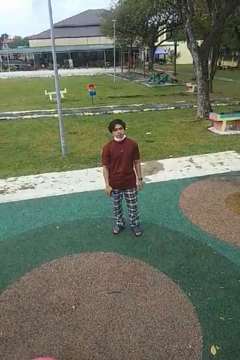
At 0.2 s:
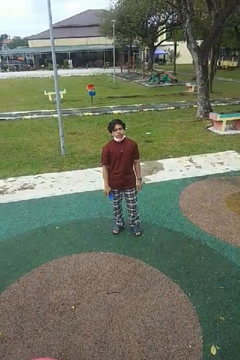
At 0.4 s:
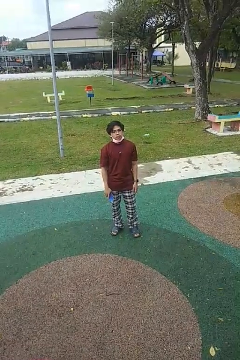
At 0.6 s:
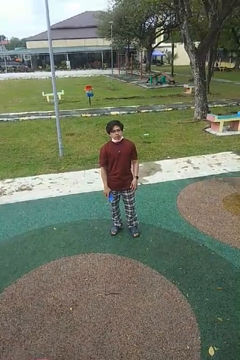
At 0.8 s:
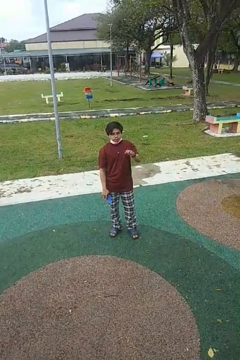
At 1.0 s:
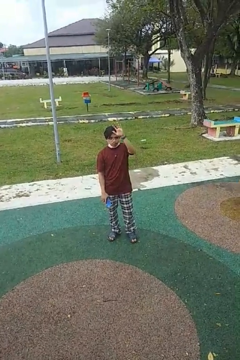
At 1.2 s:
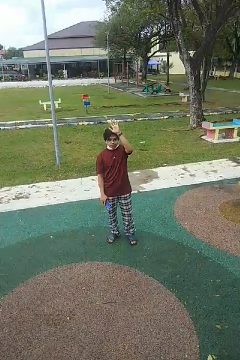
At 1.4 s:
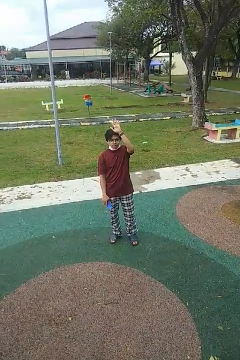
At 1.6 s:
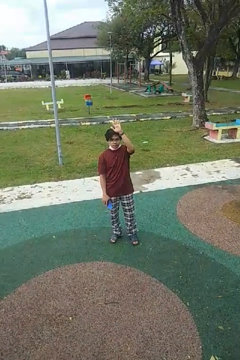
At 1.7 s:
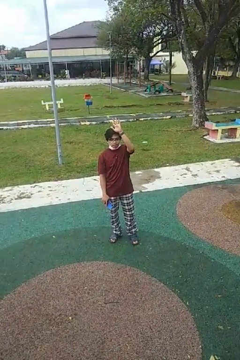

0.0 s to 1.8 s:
person gestures raise hand

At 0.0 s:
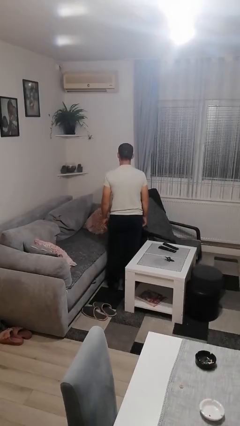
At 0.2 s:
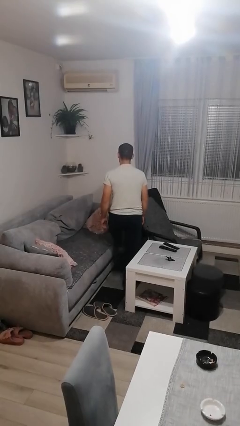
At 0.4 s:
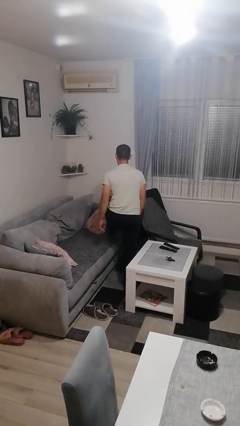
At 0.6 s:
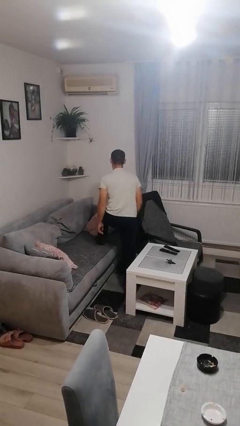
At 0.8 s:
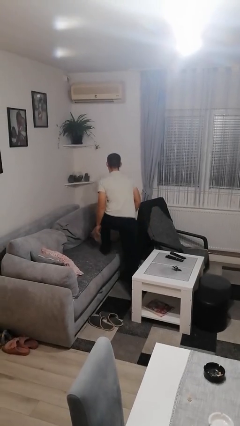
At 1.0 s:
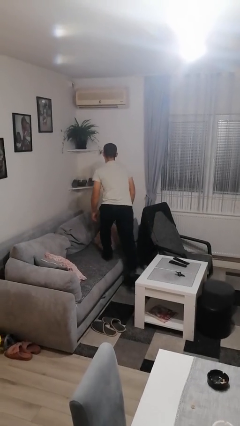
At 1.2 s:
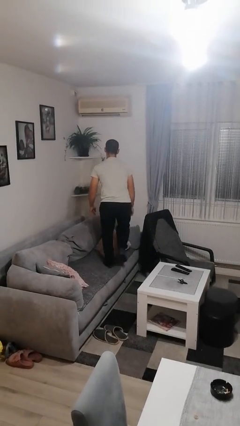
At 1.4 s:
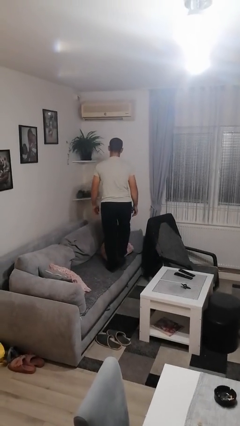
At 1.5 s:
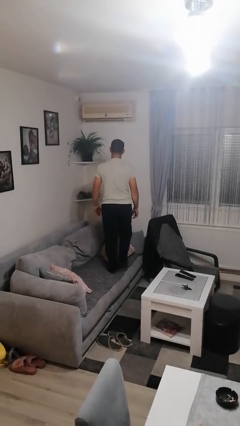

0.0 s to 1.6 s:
person climbs on couch

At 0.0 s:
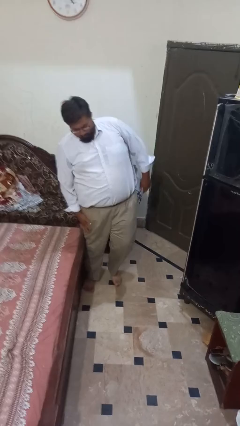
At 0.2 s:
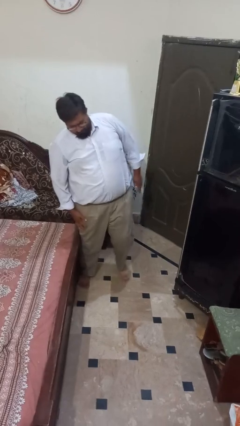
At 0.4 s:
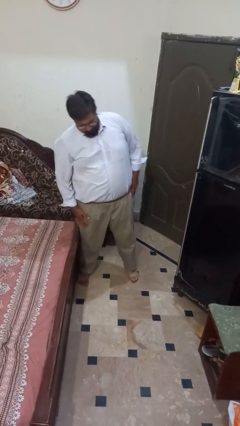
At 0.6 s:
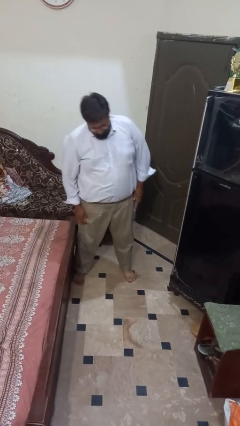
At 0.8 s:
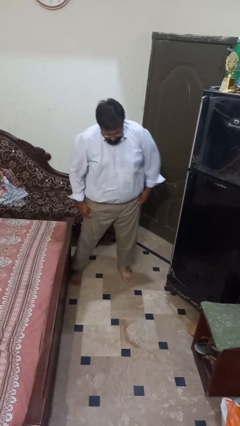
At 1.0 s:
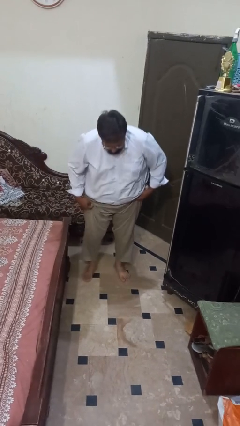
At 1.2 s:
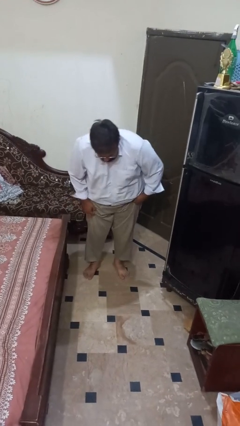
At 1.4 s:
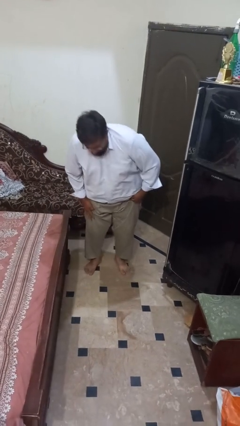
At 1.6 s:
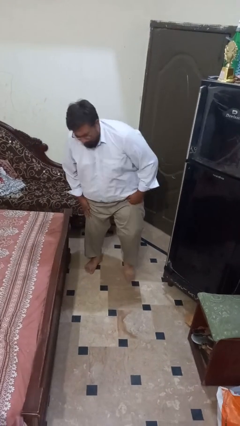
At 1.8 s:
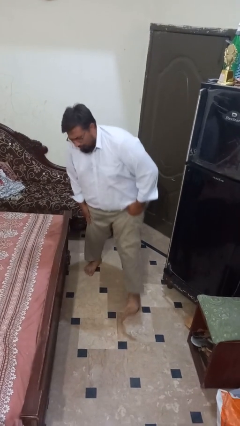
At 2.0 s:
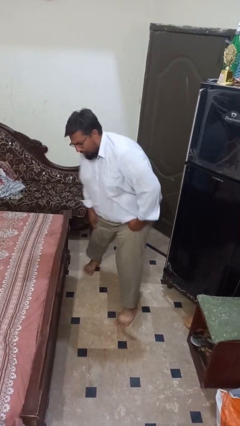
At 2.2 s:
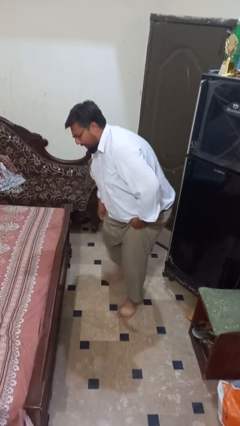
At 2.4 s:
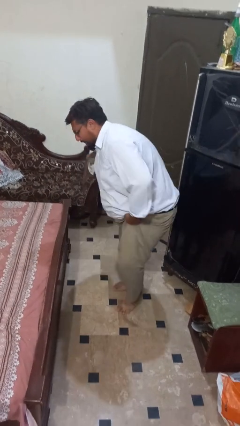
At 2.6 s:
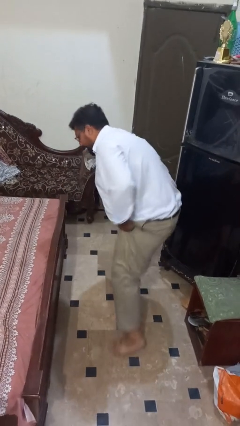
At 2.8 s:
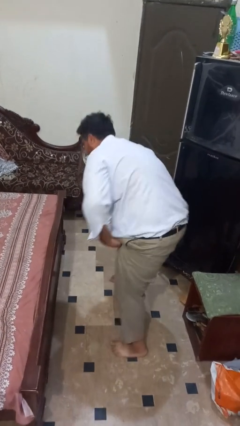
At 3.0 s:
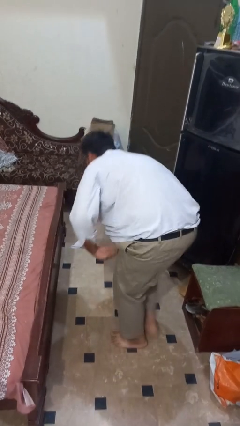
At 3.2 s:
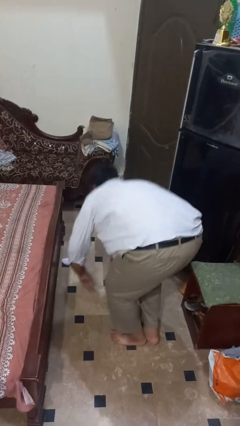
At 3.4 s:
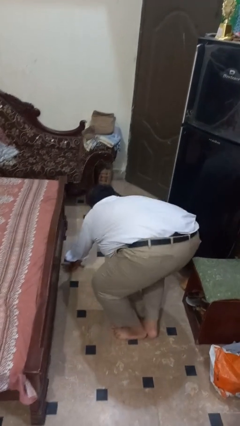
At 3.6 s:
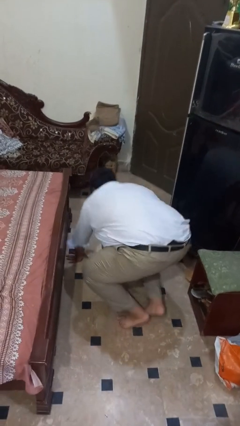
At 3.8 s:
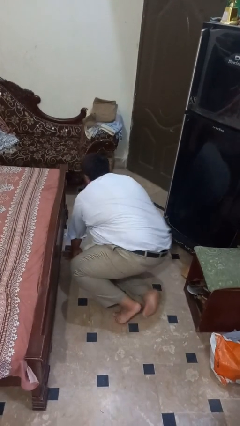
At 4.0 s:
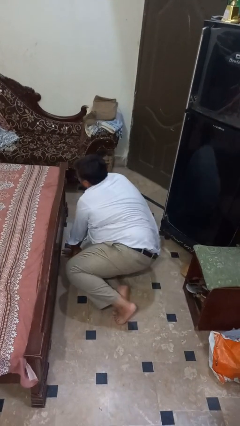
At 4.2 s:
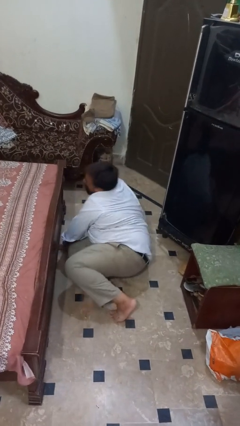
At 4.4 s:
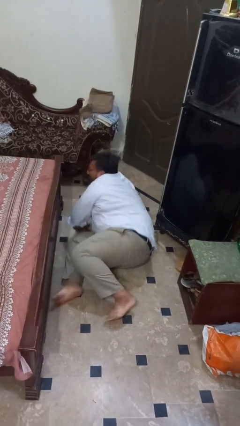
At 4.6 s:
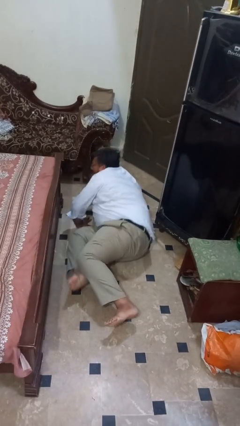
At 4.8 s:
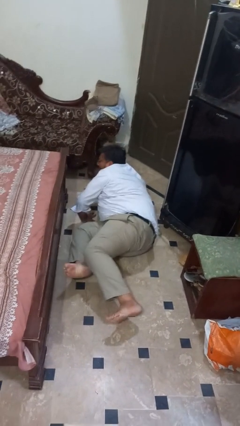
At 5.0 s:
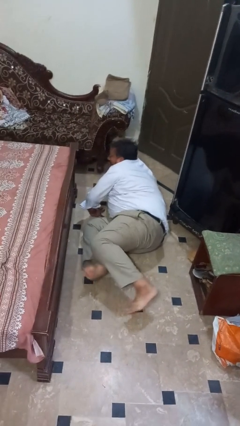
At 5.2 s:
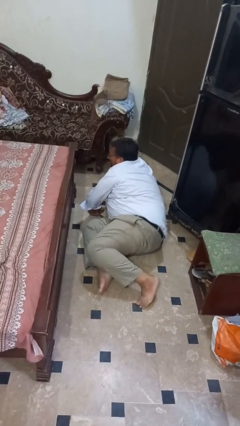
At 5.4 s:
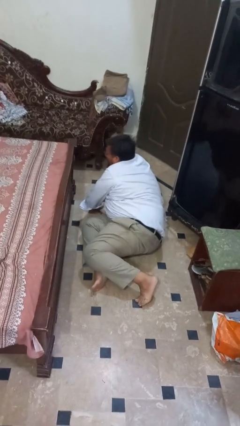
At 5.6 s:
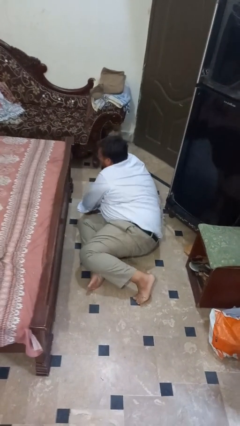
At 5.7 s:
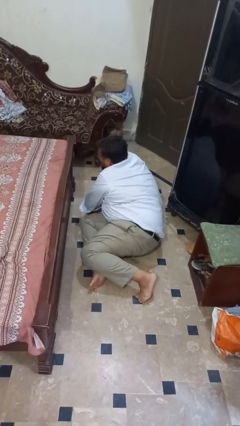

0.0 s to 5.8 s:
person lies down on floor

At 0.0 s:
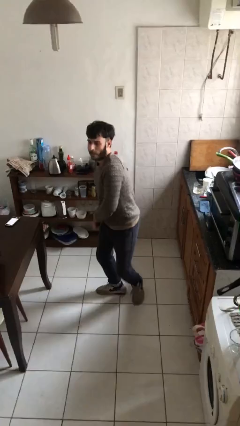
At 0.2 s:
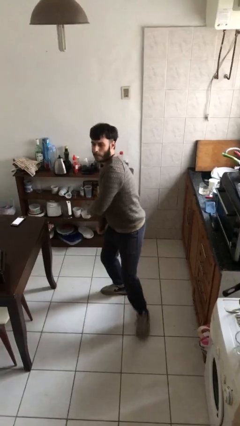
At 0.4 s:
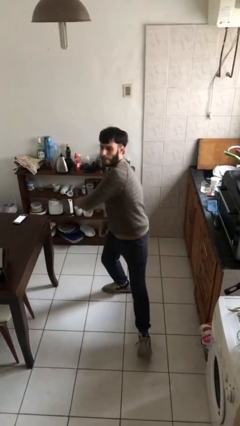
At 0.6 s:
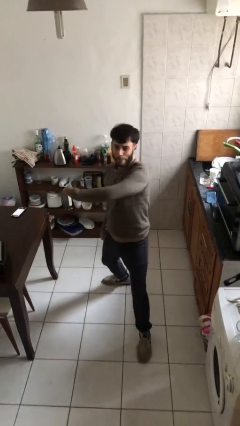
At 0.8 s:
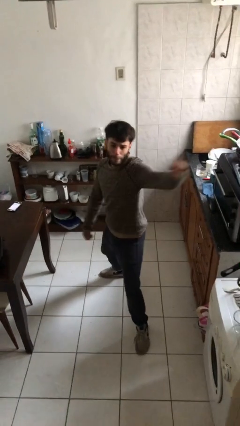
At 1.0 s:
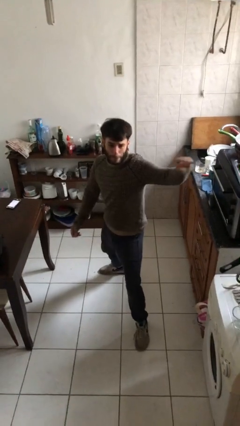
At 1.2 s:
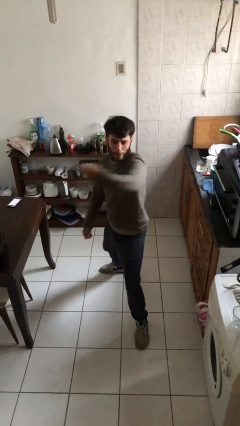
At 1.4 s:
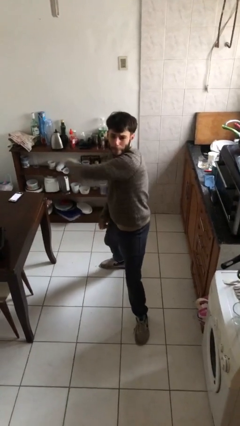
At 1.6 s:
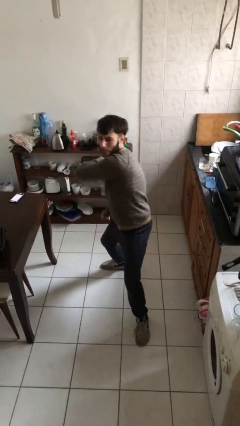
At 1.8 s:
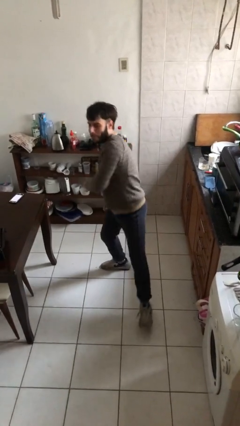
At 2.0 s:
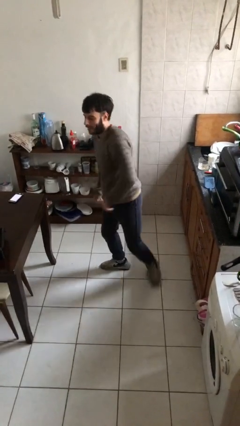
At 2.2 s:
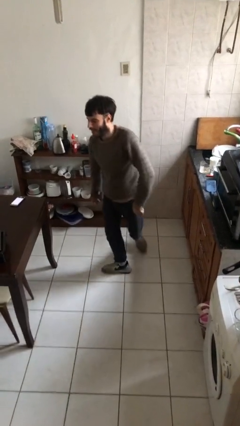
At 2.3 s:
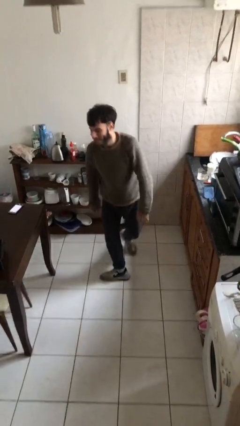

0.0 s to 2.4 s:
person karate chop

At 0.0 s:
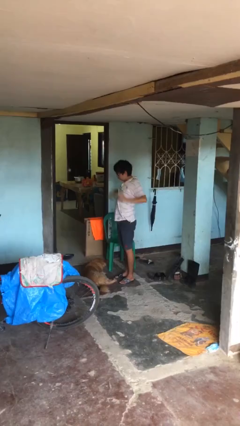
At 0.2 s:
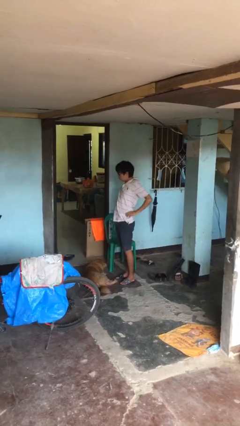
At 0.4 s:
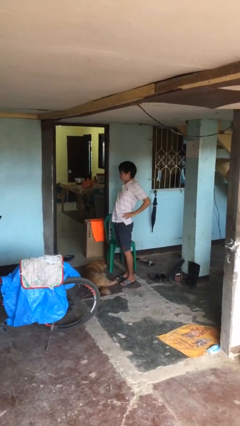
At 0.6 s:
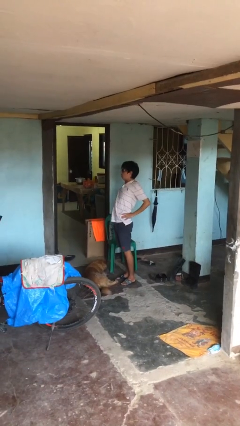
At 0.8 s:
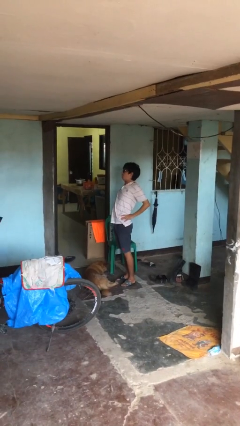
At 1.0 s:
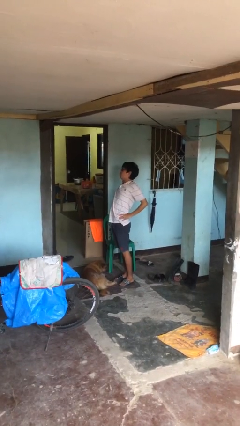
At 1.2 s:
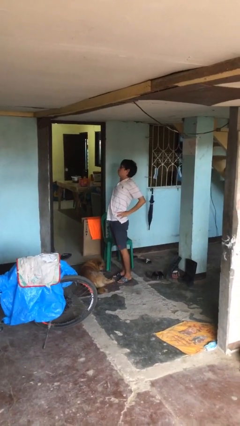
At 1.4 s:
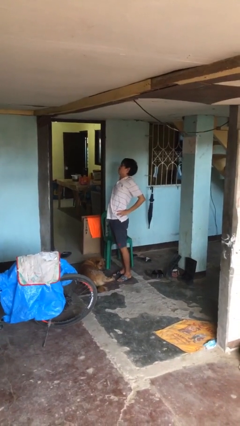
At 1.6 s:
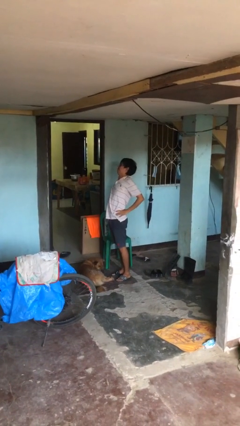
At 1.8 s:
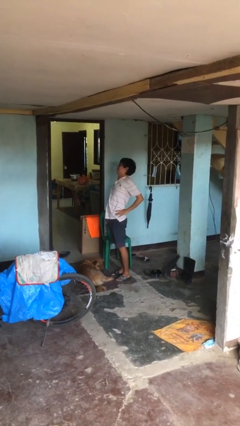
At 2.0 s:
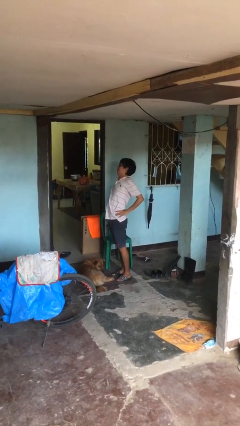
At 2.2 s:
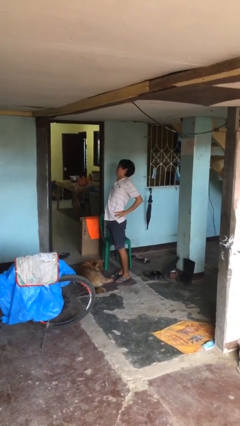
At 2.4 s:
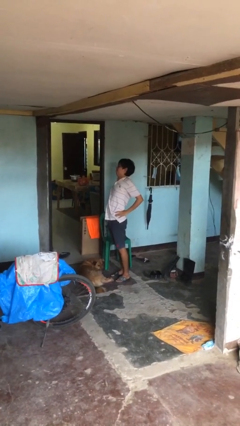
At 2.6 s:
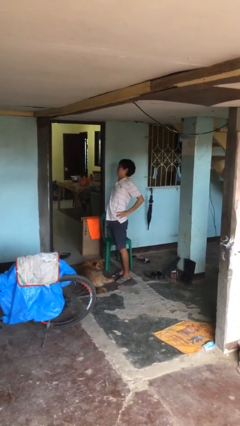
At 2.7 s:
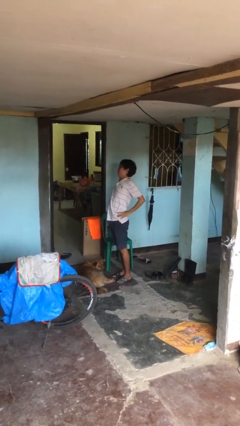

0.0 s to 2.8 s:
person stretches back

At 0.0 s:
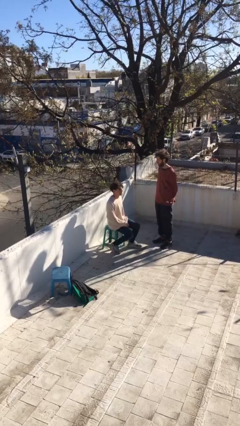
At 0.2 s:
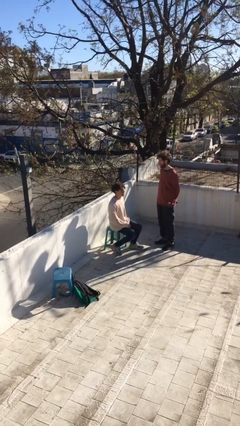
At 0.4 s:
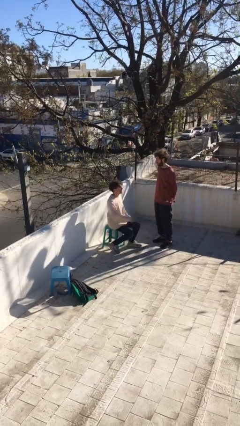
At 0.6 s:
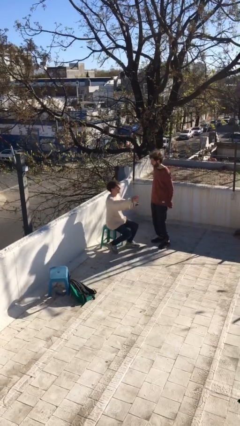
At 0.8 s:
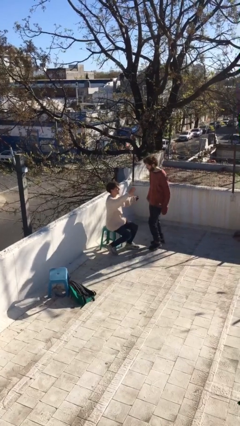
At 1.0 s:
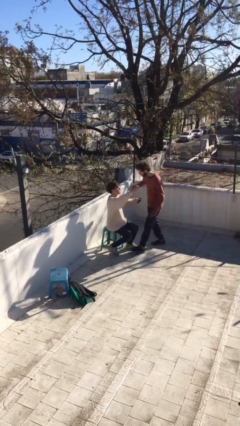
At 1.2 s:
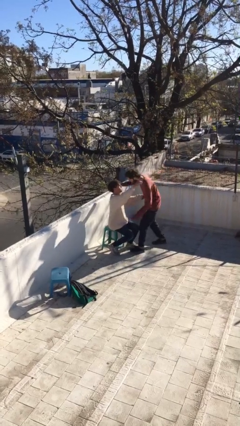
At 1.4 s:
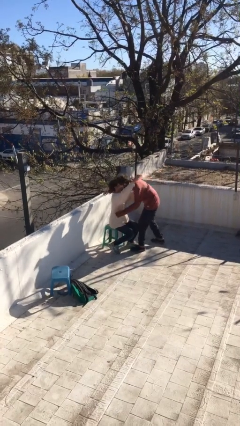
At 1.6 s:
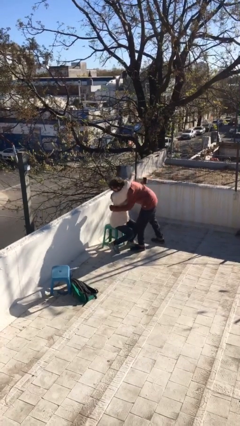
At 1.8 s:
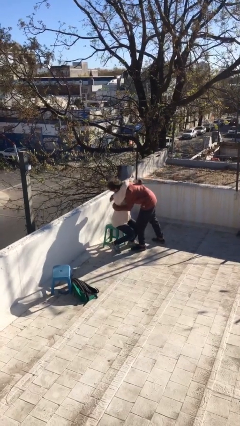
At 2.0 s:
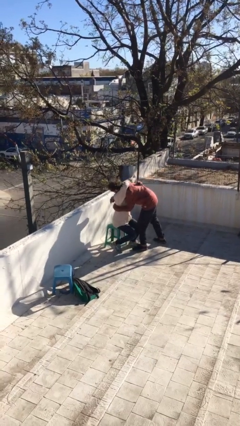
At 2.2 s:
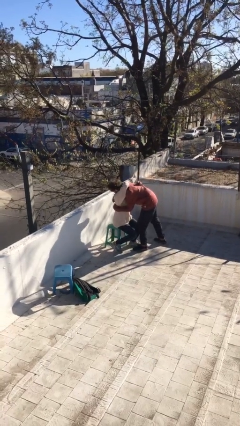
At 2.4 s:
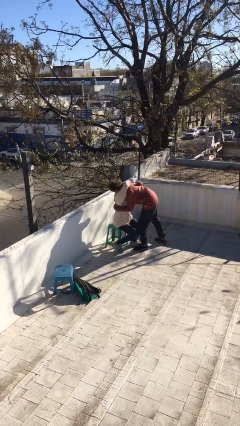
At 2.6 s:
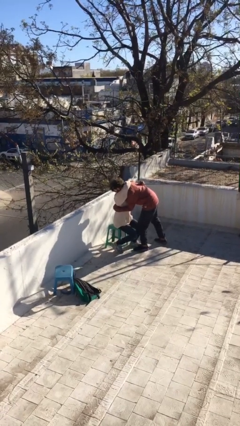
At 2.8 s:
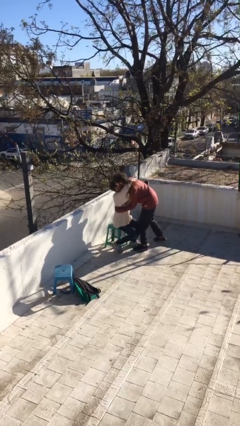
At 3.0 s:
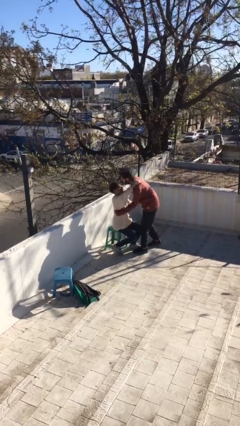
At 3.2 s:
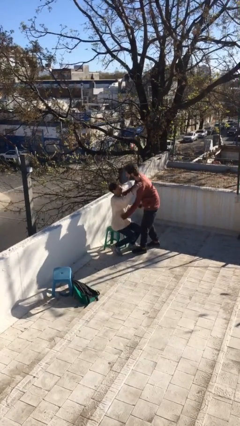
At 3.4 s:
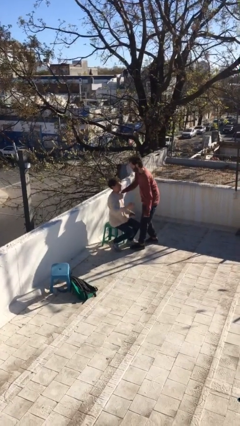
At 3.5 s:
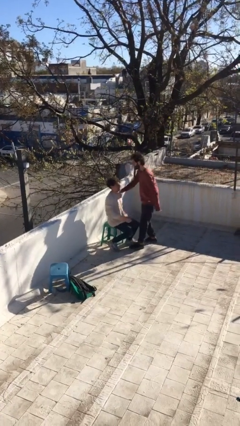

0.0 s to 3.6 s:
person embraces person
